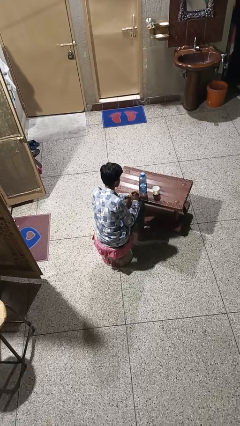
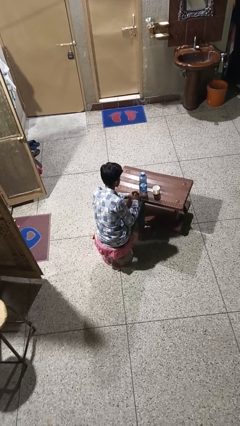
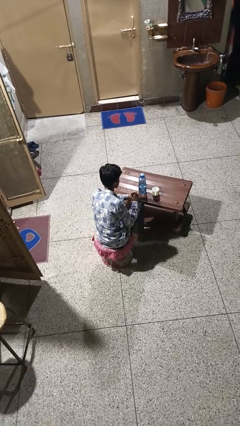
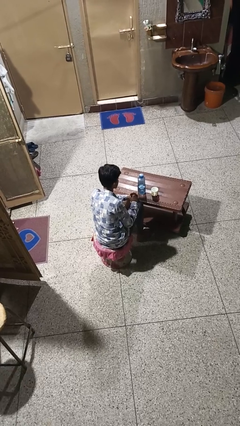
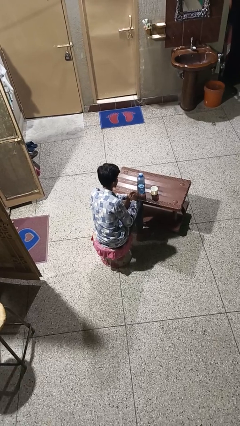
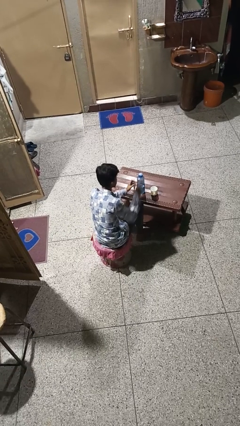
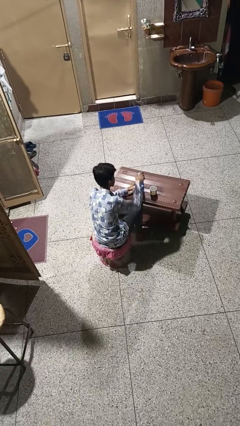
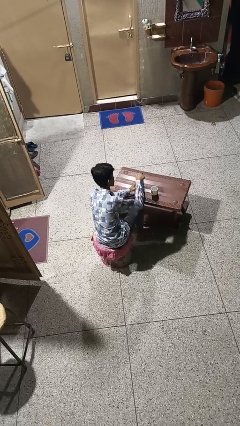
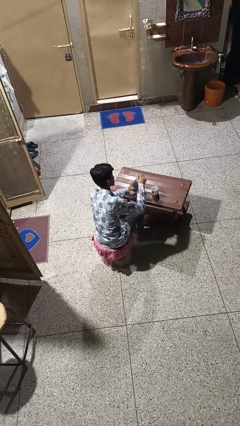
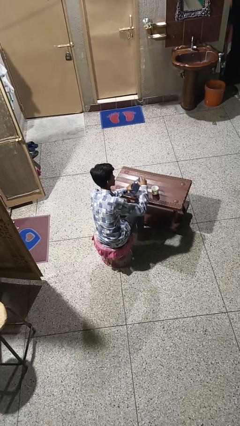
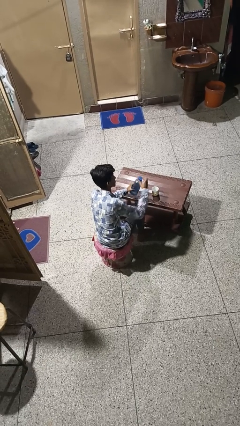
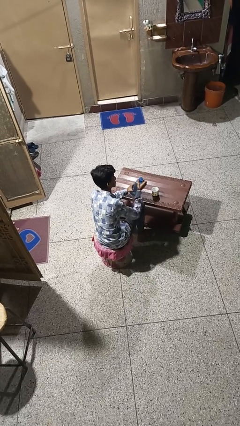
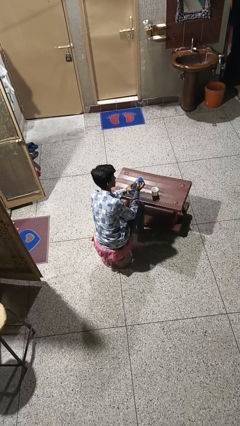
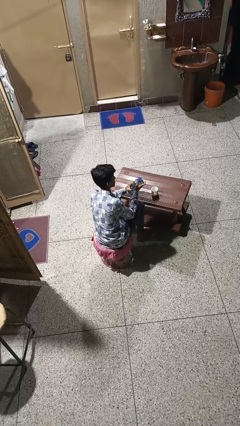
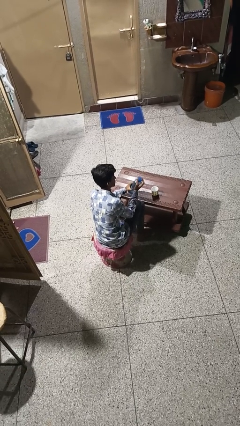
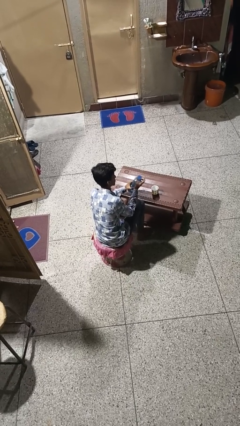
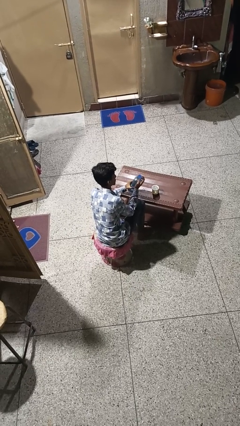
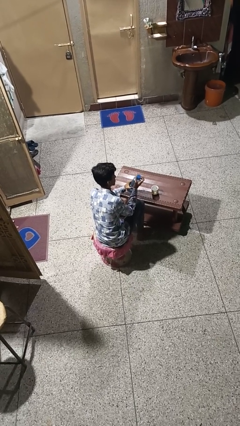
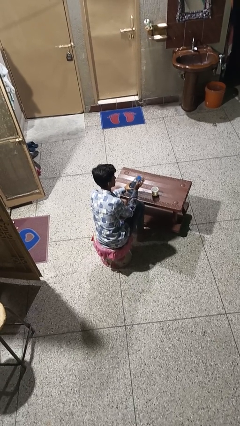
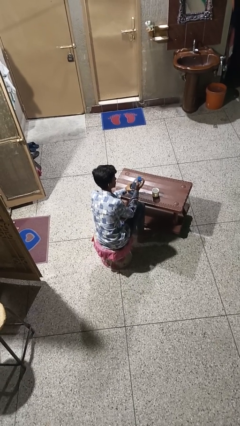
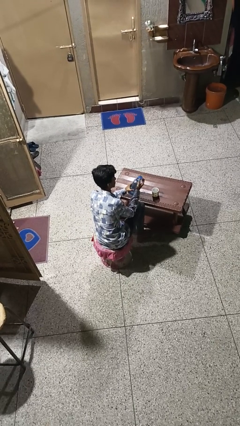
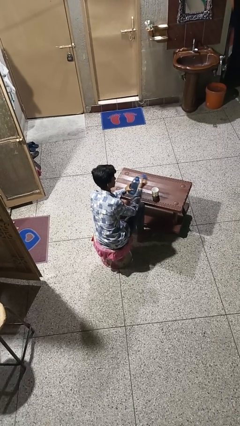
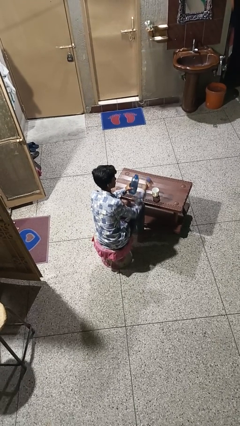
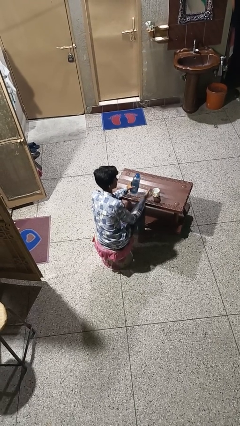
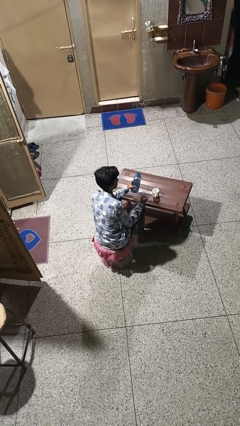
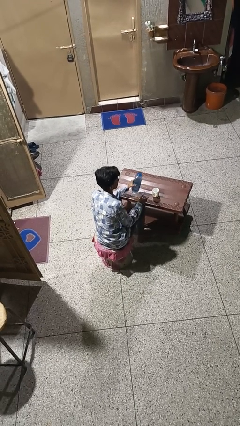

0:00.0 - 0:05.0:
person unscrews lid from bottle

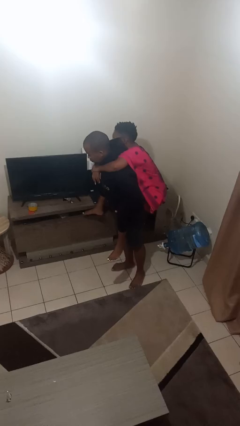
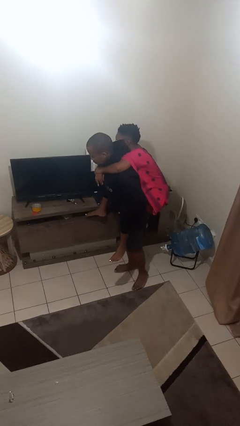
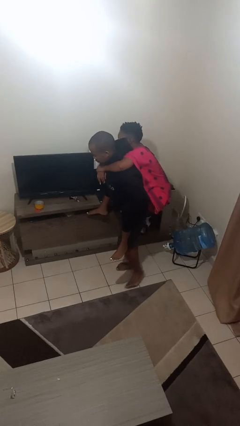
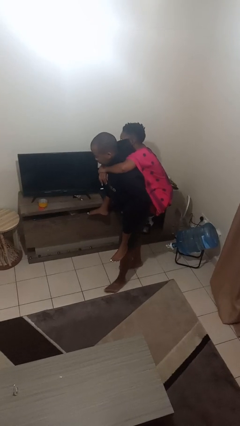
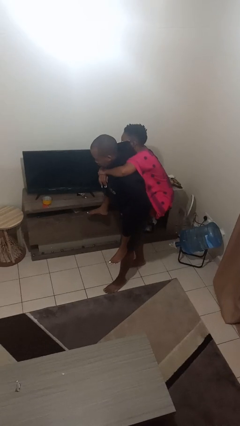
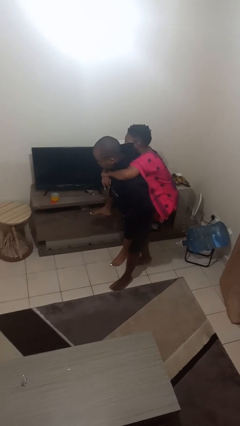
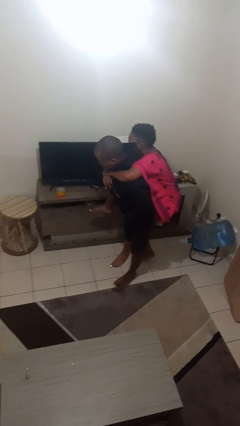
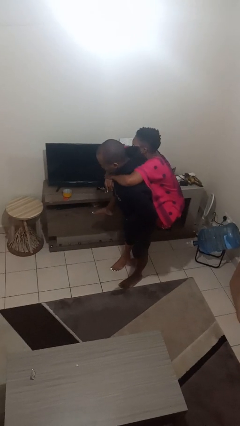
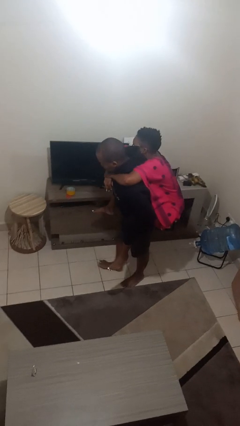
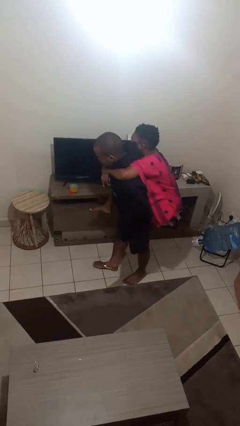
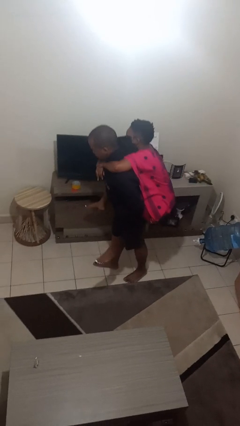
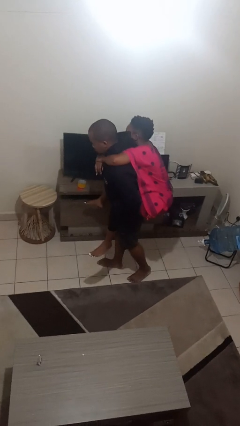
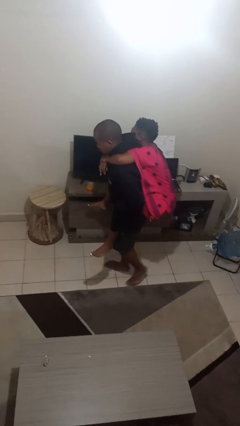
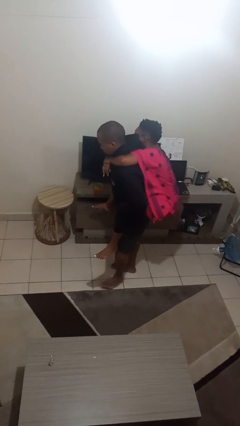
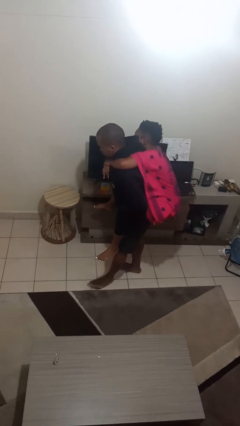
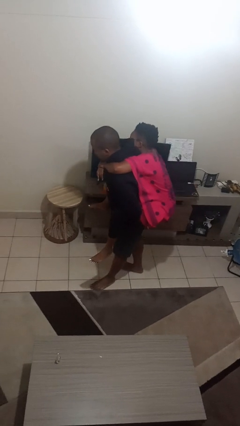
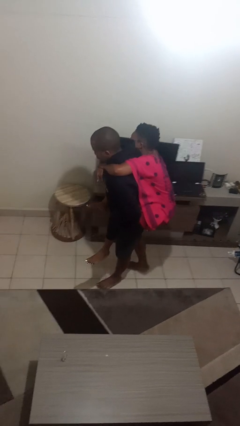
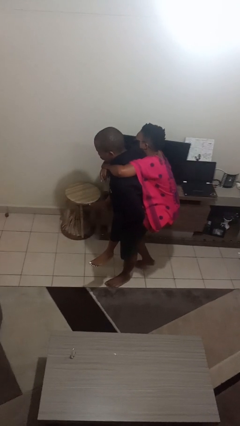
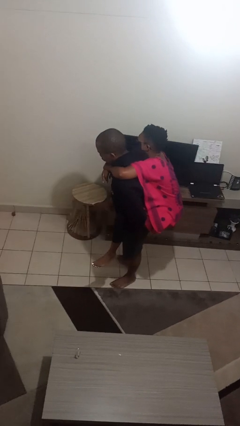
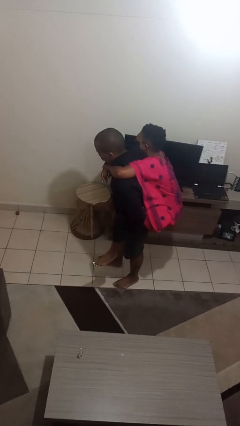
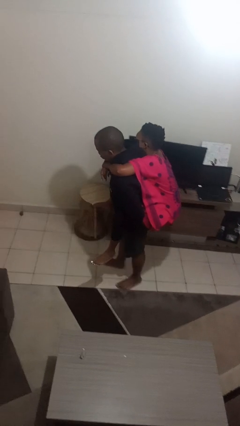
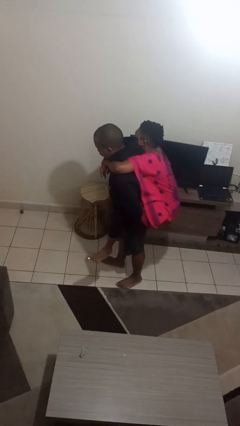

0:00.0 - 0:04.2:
person carries person on back

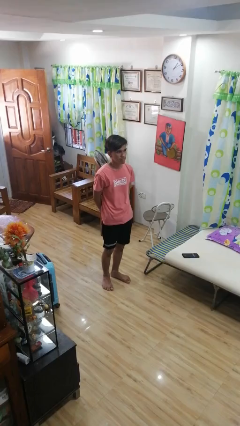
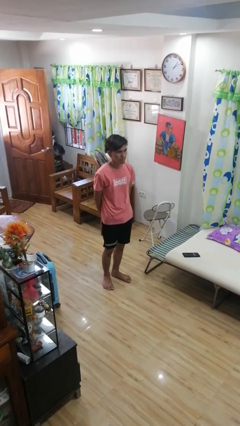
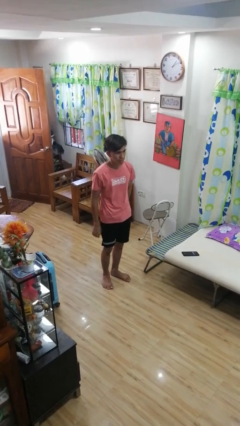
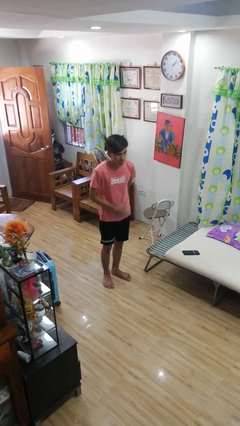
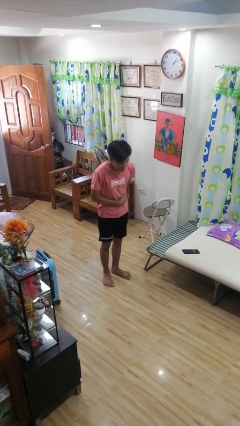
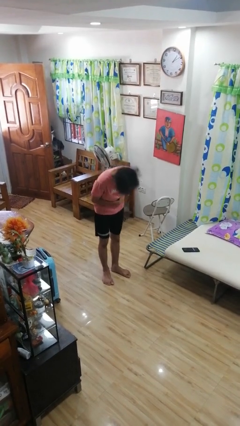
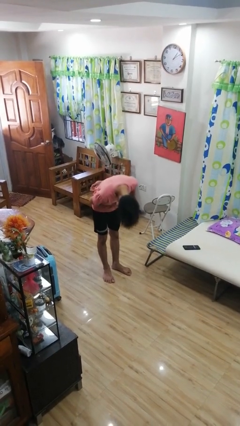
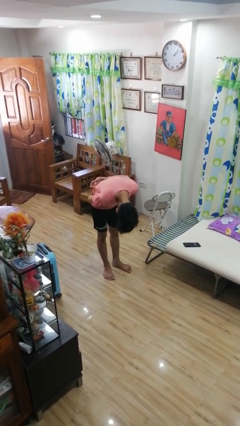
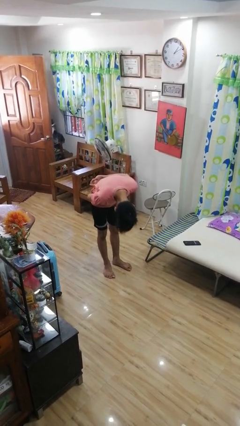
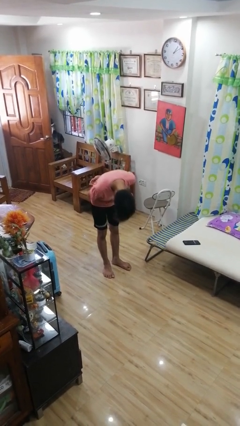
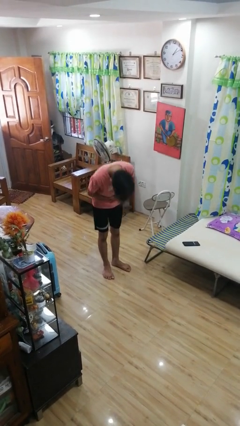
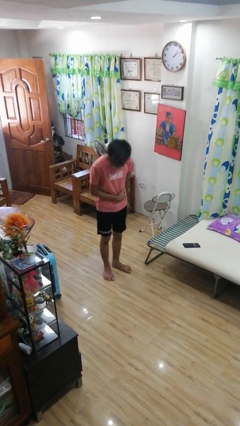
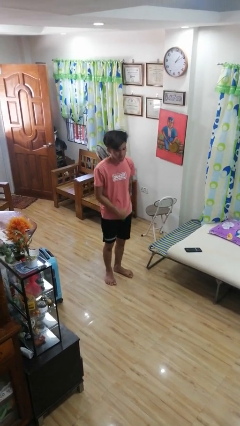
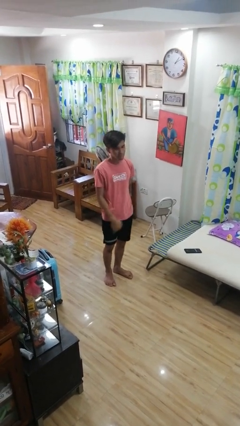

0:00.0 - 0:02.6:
person bows

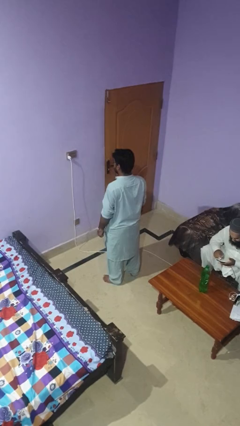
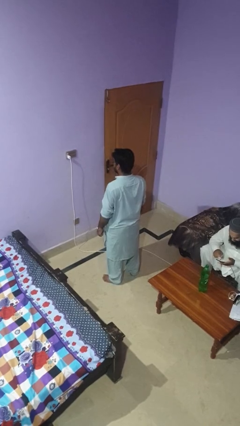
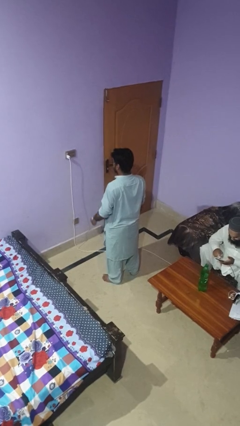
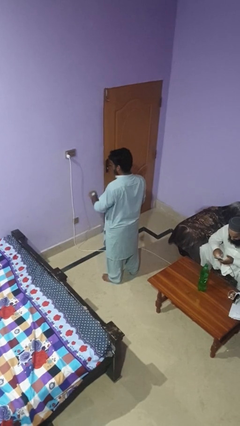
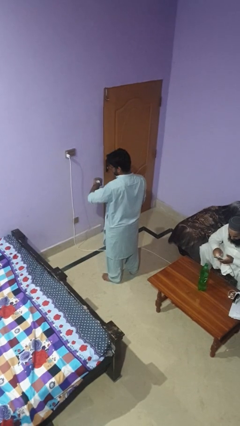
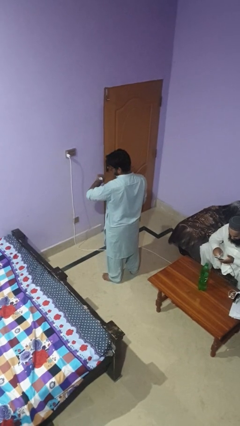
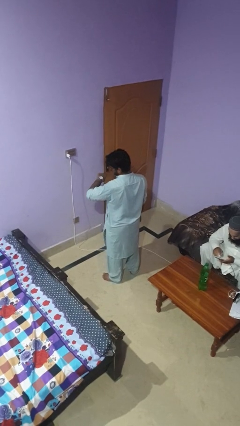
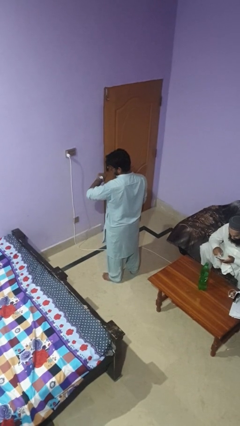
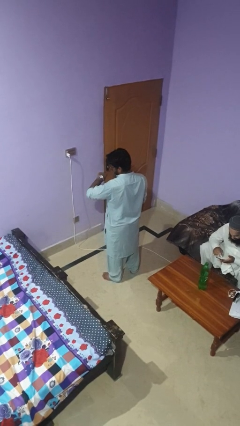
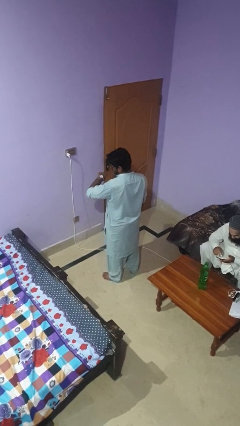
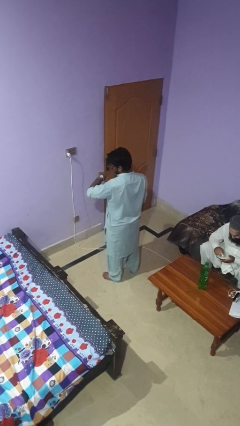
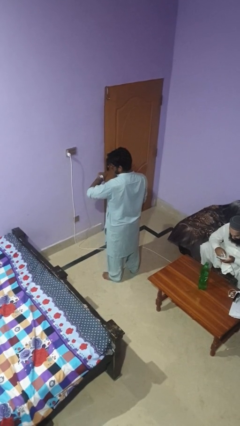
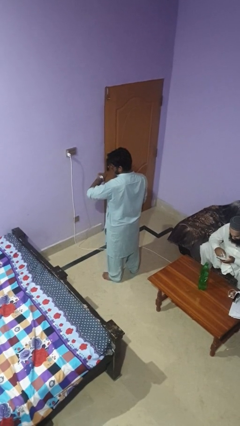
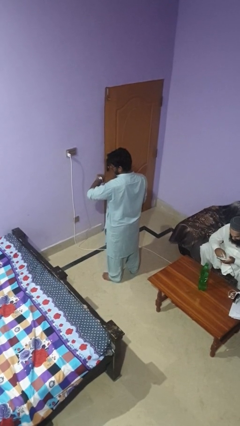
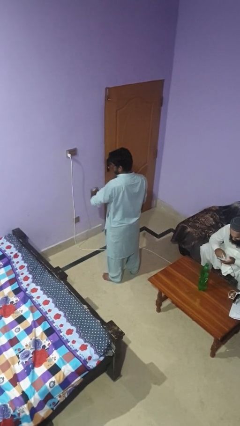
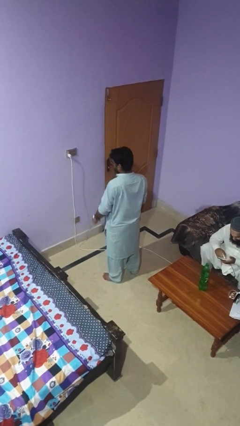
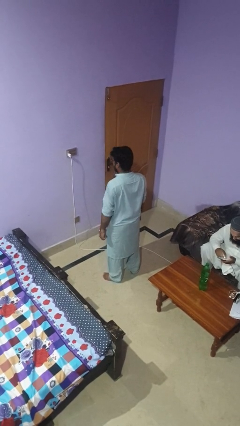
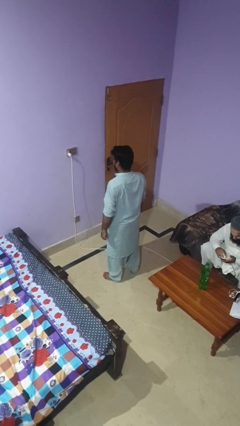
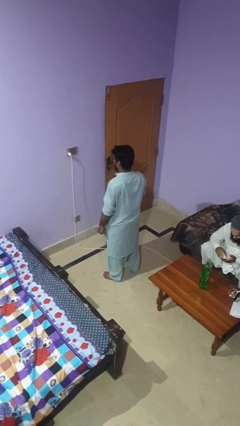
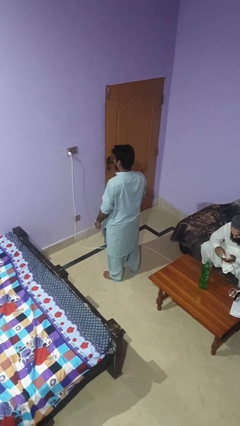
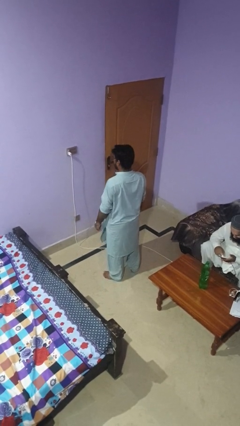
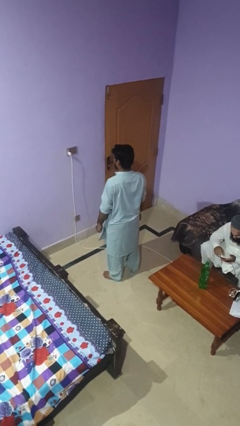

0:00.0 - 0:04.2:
person looks at wristwatch

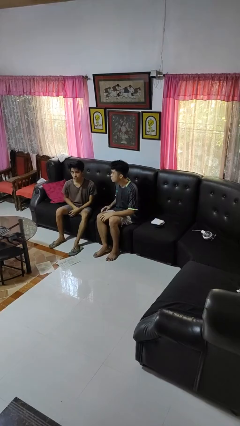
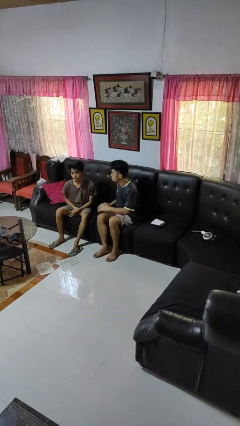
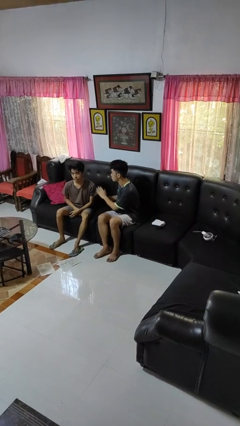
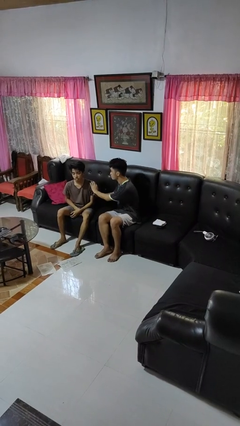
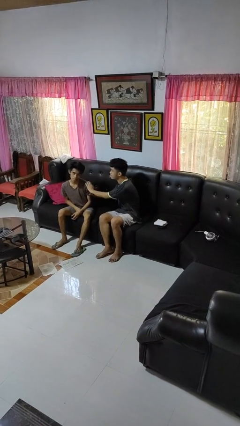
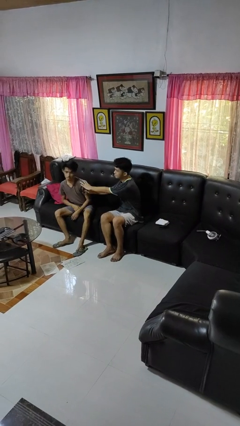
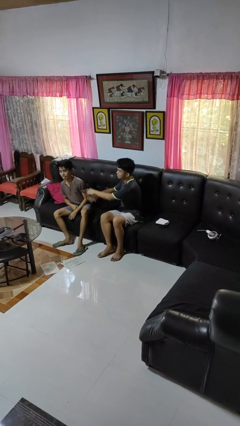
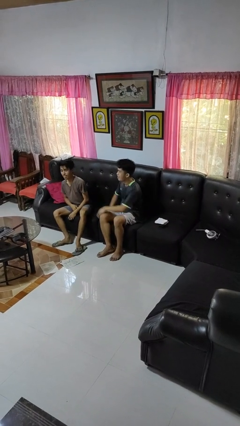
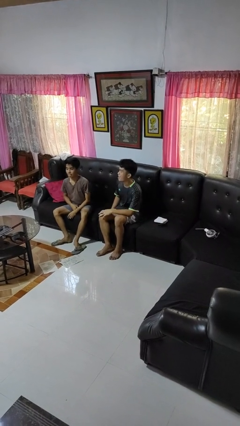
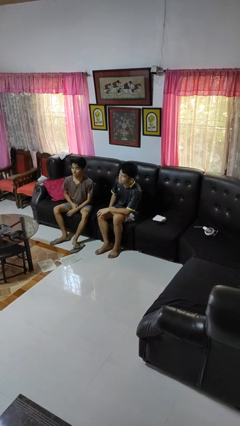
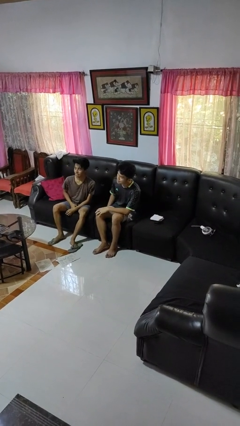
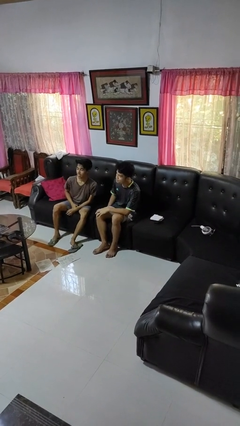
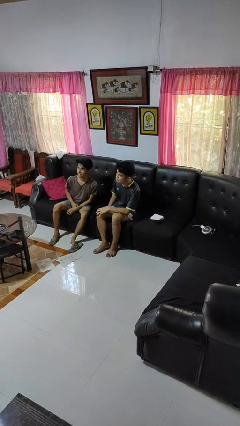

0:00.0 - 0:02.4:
person shoves person
